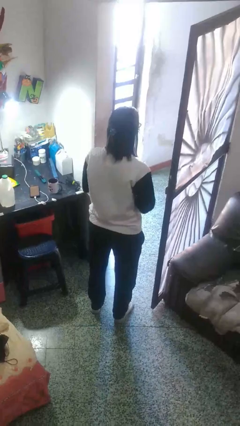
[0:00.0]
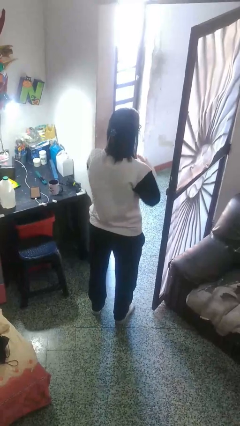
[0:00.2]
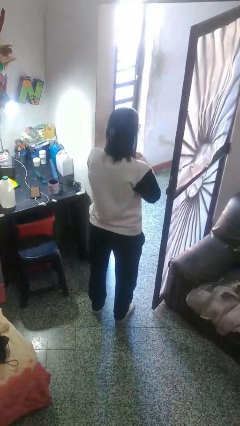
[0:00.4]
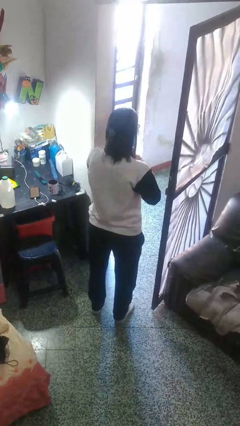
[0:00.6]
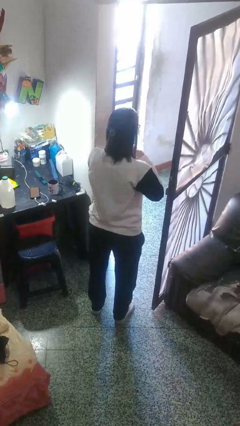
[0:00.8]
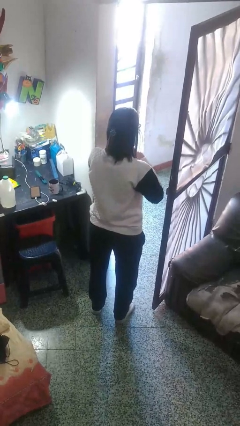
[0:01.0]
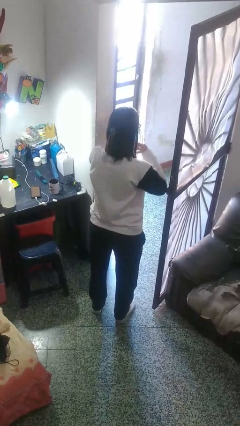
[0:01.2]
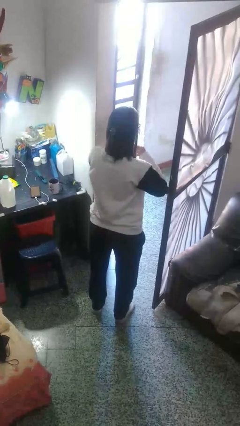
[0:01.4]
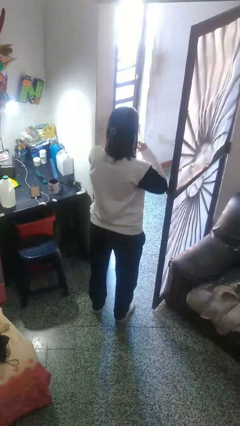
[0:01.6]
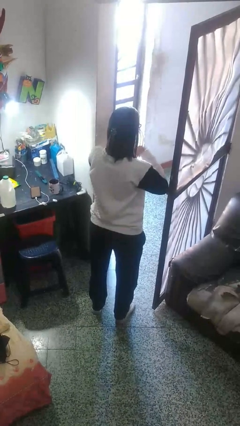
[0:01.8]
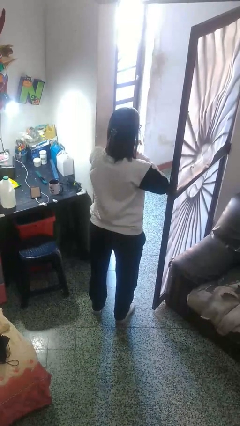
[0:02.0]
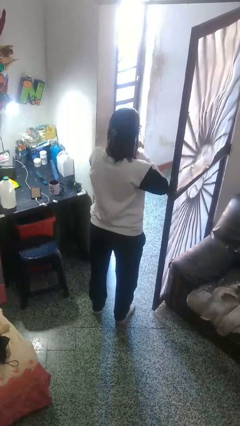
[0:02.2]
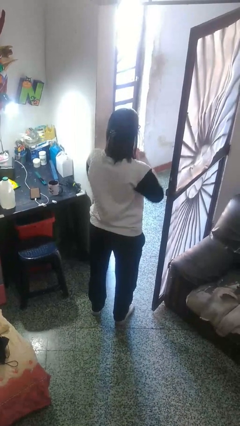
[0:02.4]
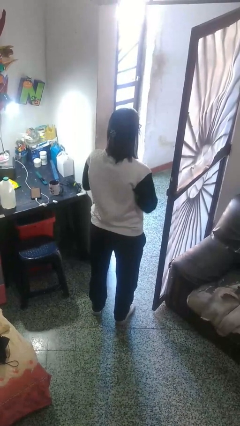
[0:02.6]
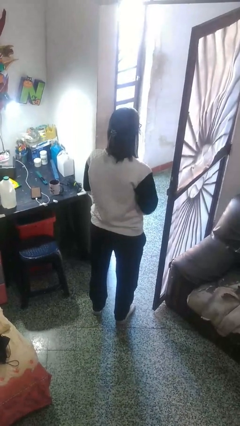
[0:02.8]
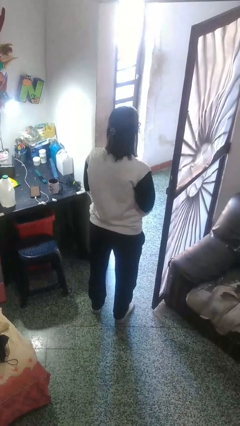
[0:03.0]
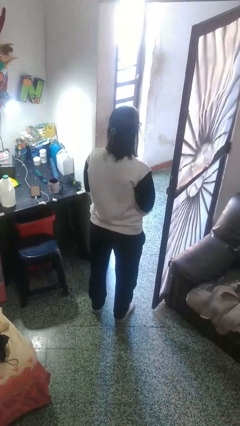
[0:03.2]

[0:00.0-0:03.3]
person cracks knuckles

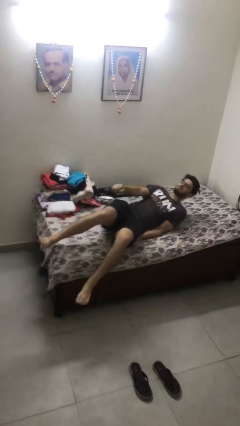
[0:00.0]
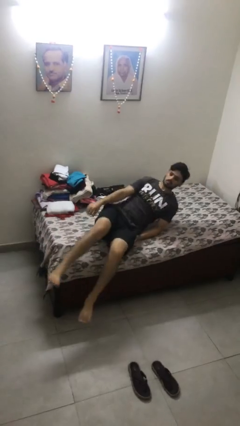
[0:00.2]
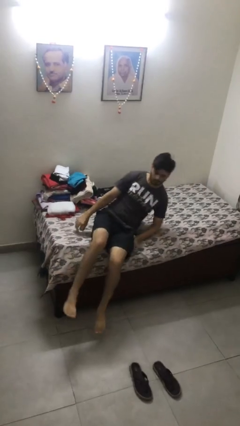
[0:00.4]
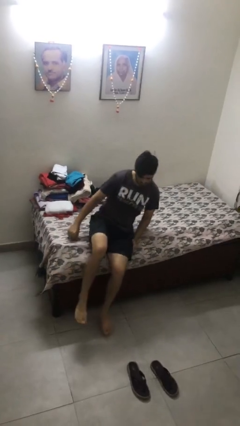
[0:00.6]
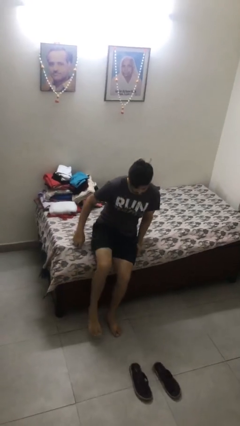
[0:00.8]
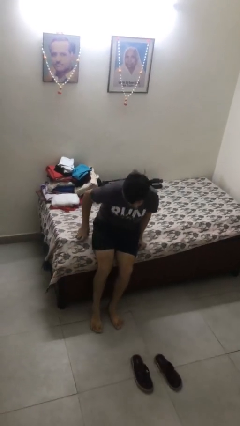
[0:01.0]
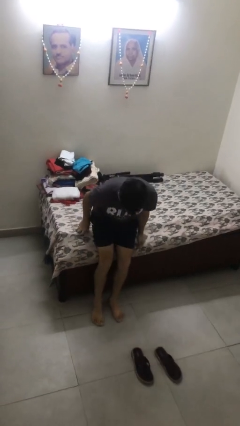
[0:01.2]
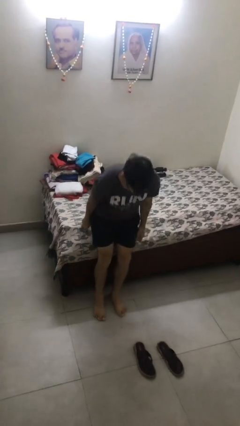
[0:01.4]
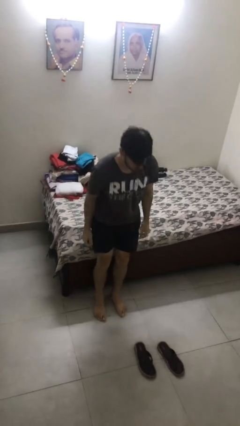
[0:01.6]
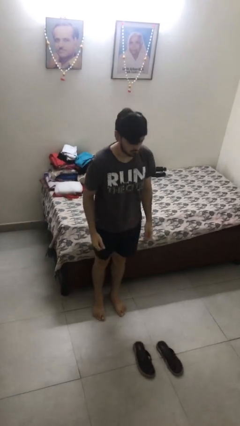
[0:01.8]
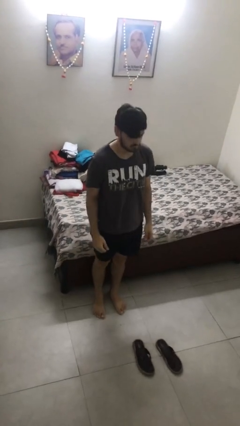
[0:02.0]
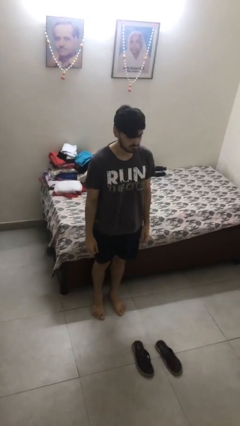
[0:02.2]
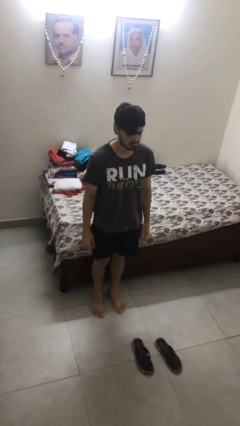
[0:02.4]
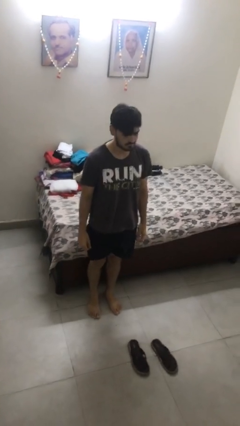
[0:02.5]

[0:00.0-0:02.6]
person stands up

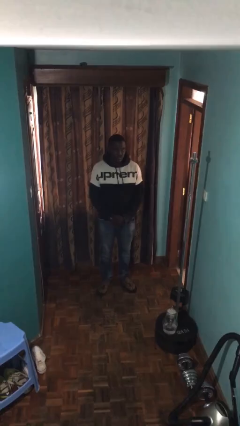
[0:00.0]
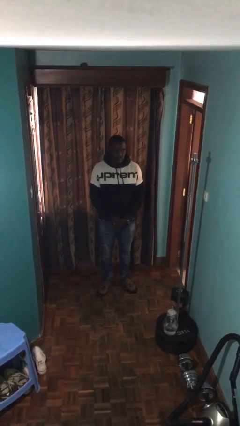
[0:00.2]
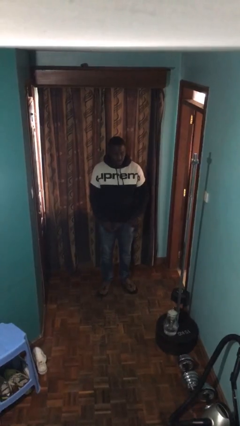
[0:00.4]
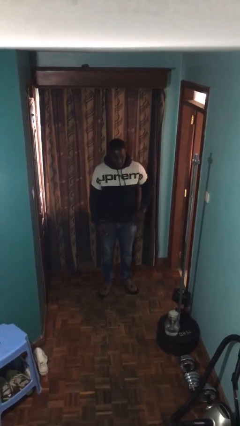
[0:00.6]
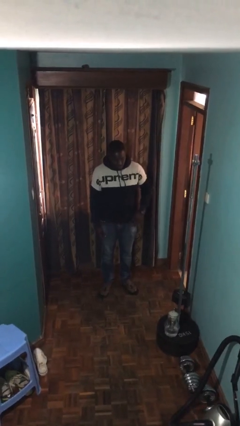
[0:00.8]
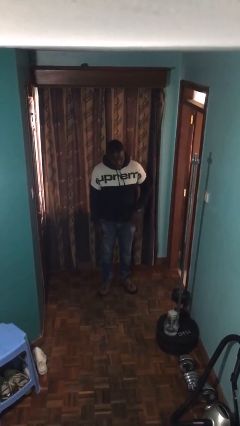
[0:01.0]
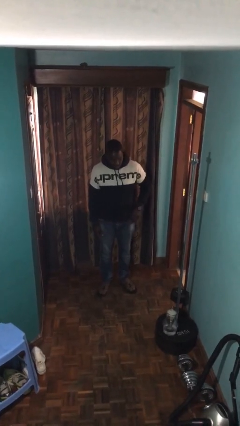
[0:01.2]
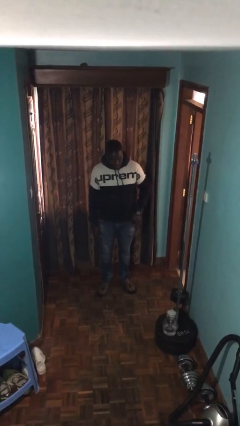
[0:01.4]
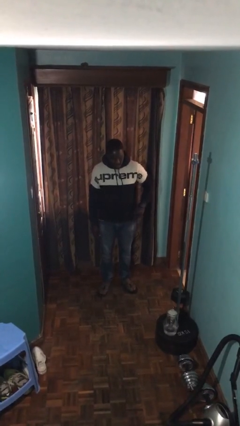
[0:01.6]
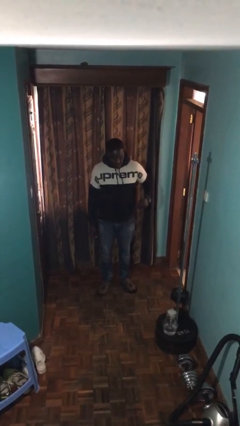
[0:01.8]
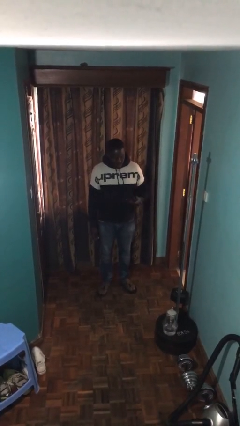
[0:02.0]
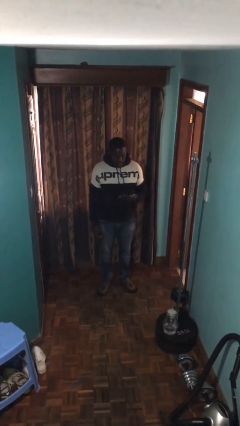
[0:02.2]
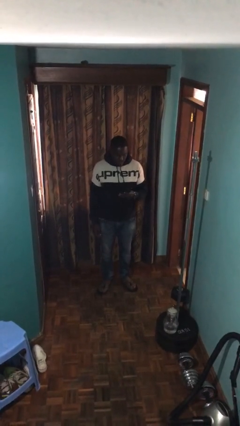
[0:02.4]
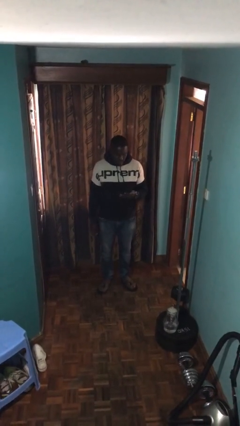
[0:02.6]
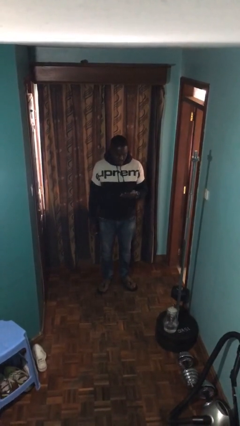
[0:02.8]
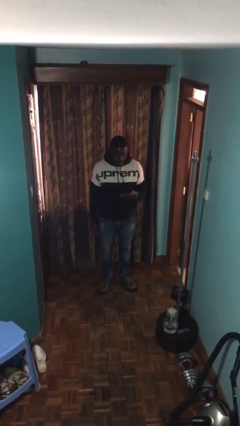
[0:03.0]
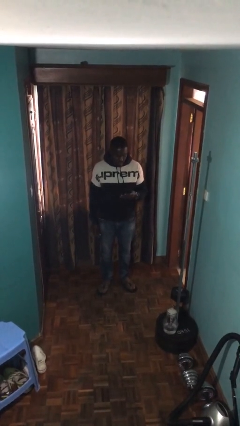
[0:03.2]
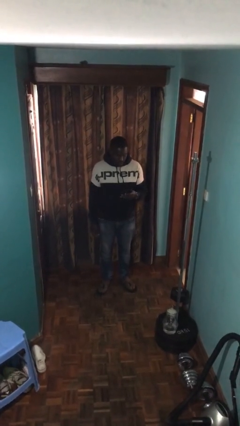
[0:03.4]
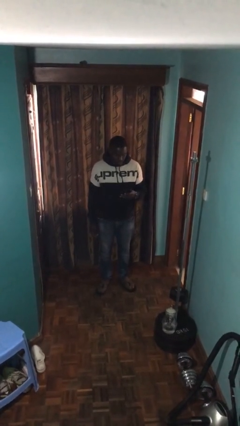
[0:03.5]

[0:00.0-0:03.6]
person takes phone from pocket

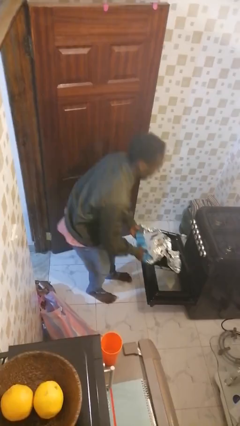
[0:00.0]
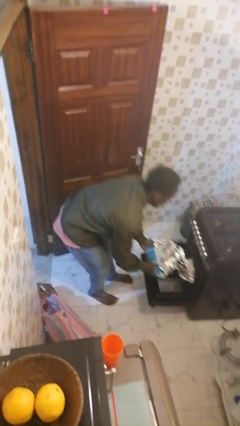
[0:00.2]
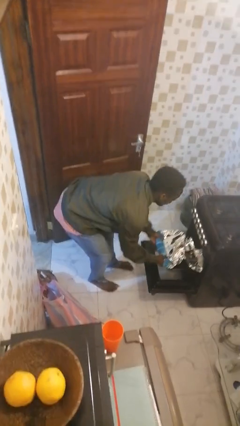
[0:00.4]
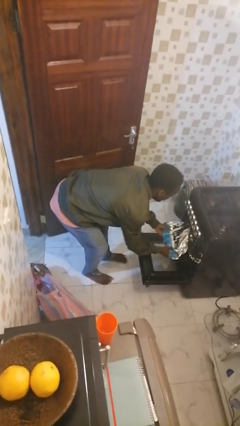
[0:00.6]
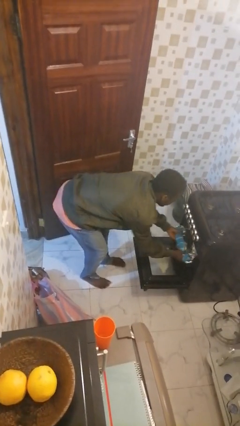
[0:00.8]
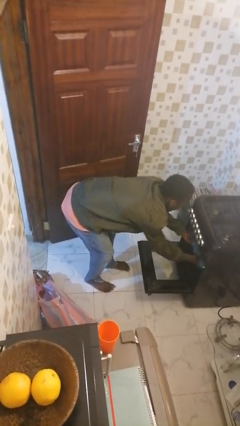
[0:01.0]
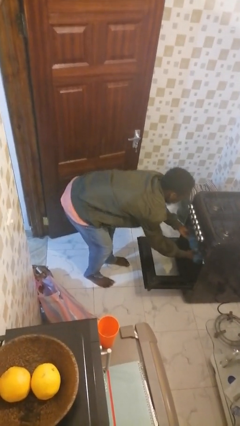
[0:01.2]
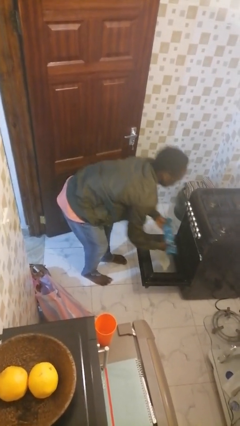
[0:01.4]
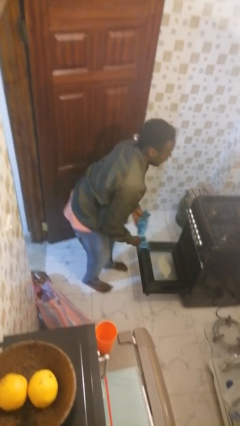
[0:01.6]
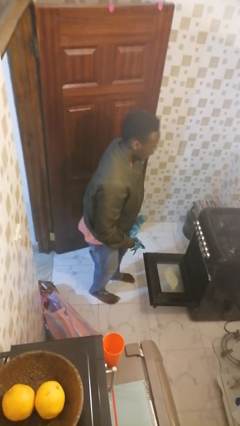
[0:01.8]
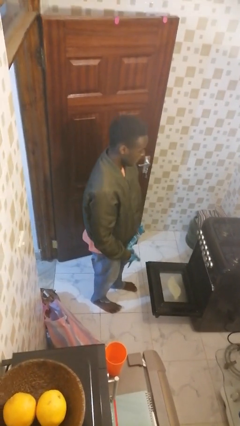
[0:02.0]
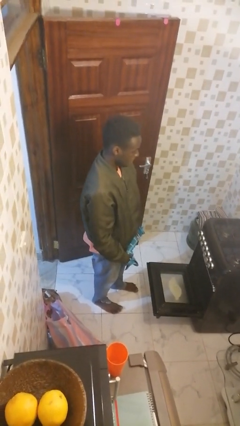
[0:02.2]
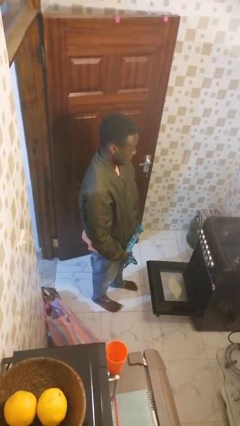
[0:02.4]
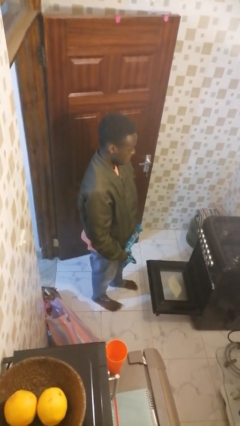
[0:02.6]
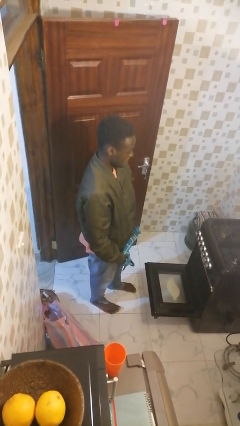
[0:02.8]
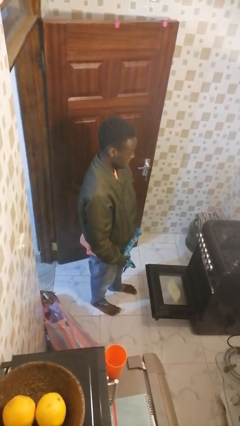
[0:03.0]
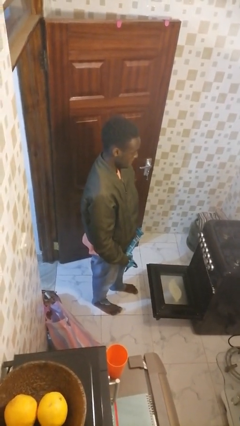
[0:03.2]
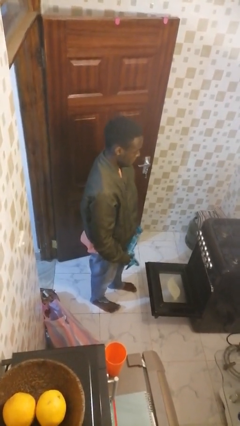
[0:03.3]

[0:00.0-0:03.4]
person puts object into oven

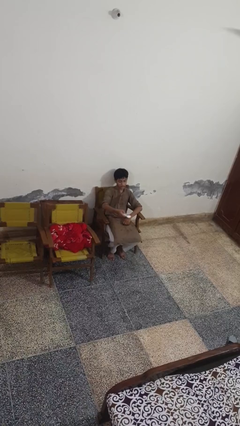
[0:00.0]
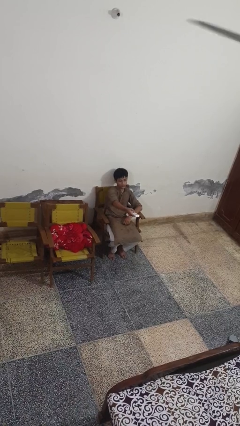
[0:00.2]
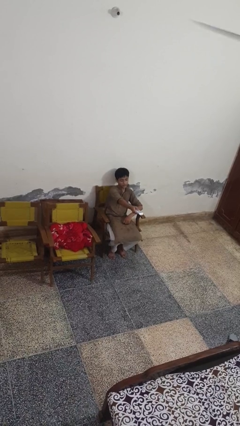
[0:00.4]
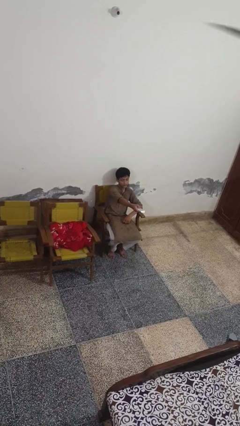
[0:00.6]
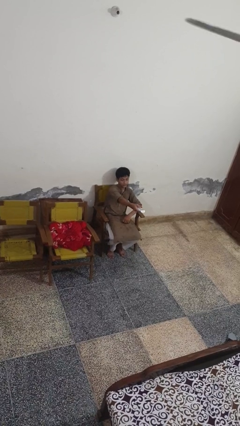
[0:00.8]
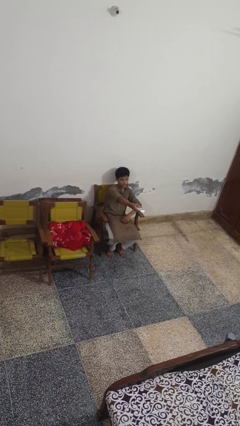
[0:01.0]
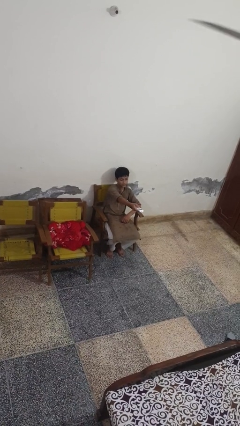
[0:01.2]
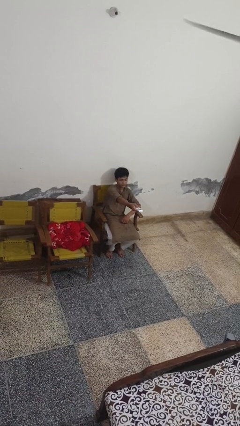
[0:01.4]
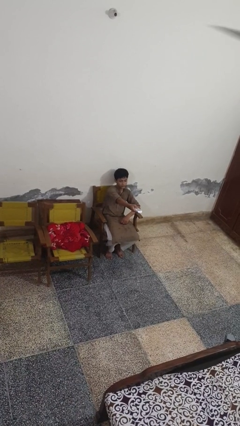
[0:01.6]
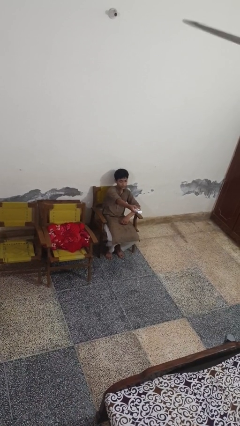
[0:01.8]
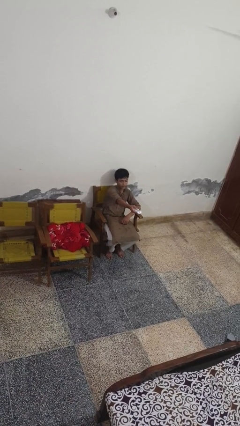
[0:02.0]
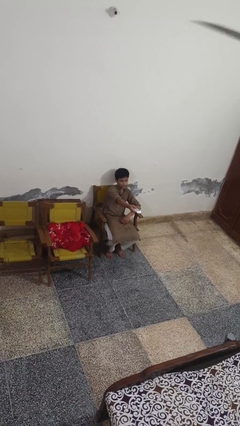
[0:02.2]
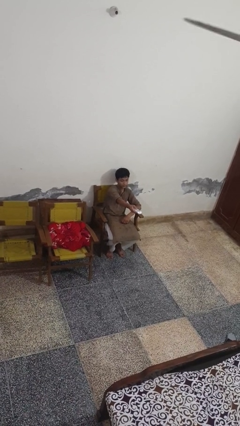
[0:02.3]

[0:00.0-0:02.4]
person uses television remote

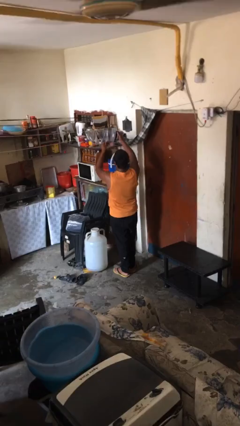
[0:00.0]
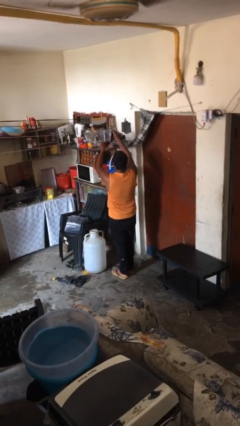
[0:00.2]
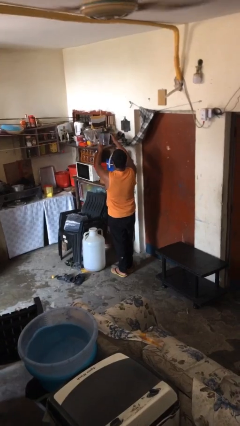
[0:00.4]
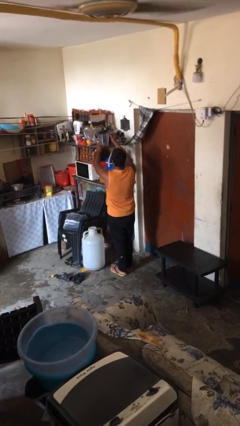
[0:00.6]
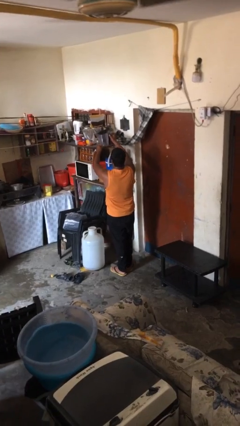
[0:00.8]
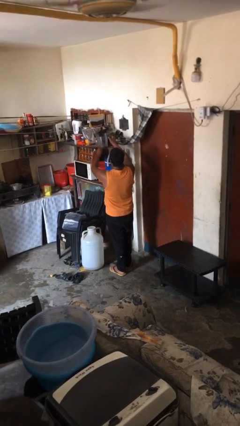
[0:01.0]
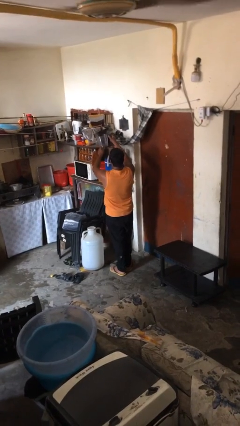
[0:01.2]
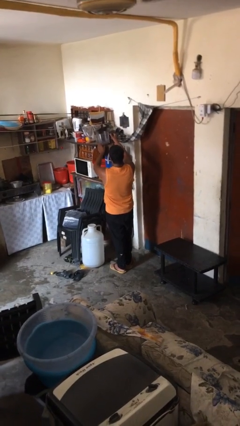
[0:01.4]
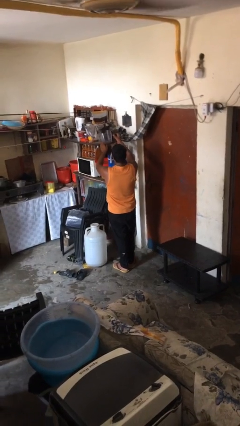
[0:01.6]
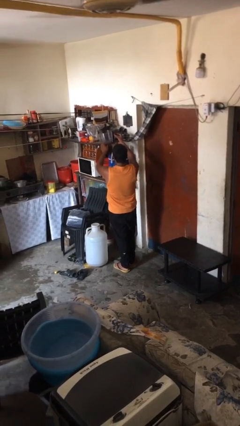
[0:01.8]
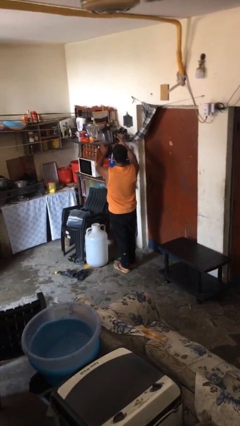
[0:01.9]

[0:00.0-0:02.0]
person puts down object on shelf

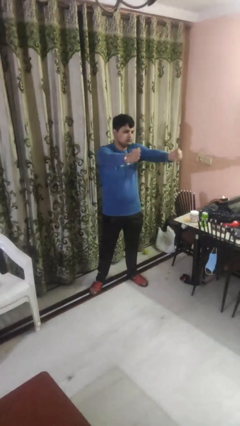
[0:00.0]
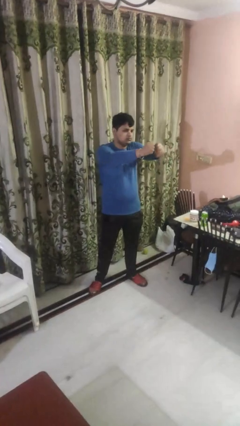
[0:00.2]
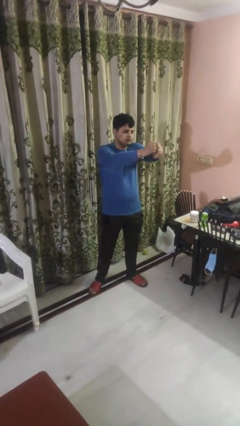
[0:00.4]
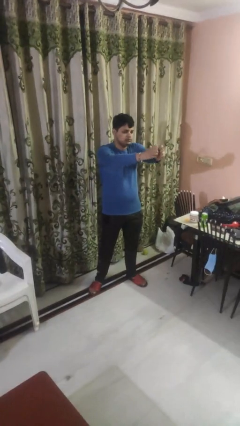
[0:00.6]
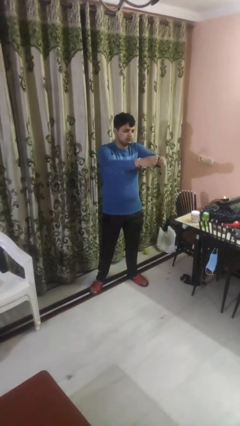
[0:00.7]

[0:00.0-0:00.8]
person gestures zoom out
